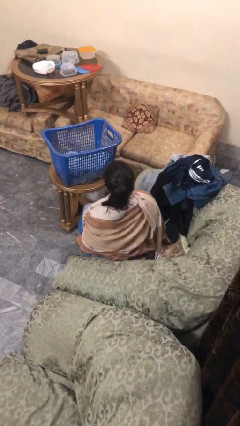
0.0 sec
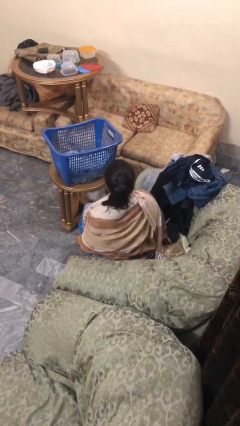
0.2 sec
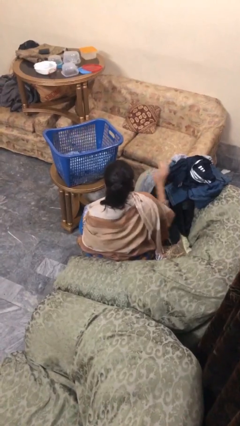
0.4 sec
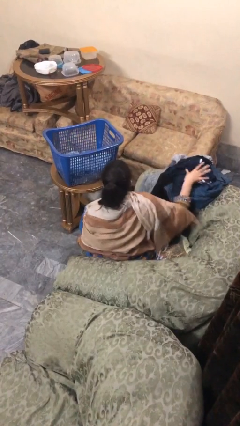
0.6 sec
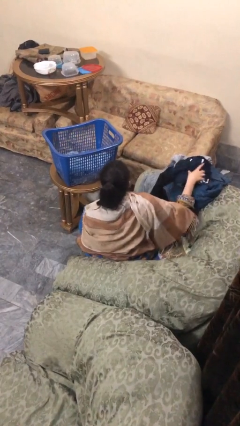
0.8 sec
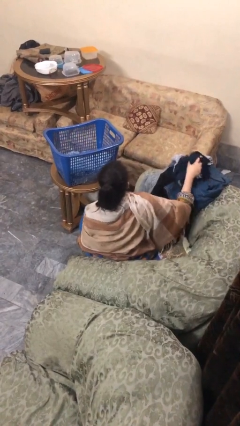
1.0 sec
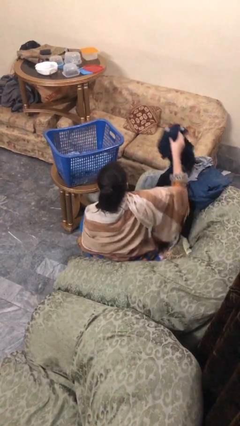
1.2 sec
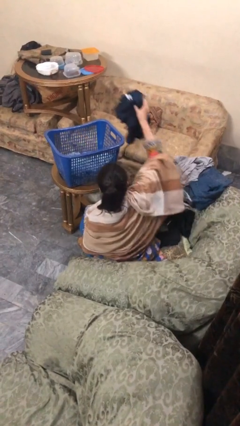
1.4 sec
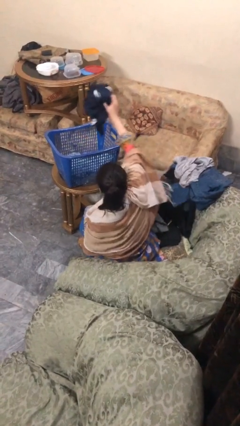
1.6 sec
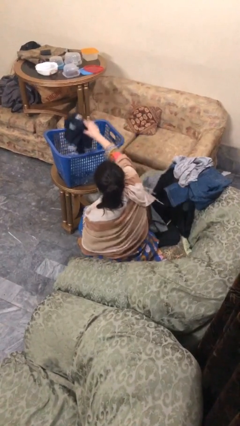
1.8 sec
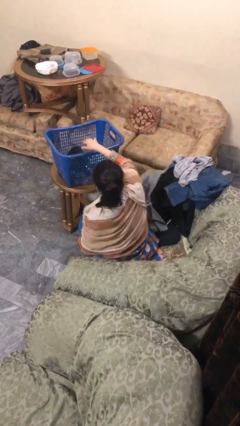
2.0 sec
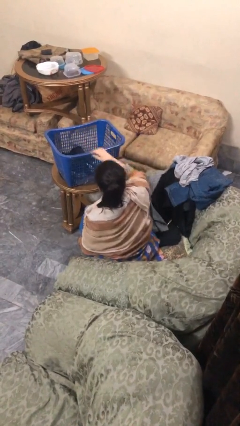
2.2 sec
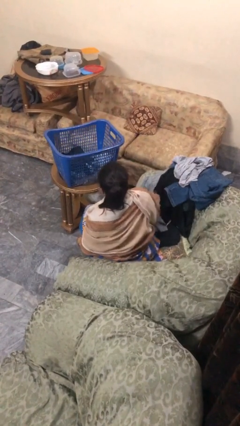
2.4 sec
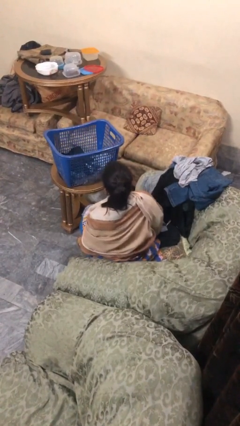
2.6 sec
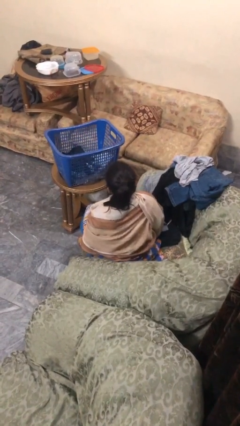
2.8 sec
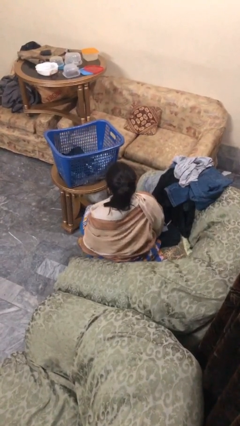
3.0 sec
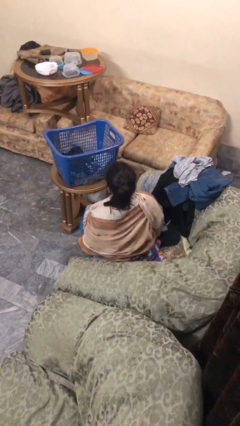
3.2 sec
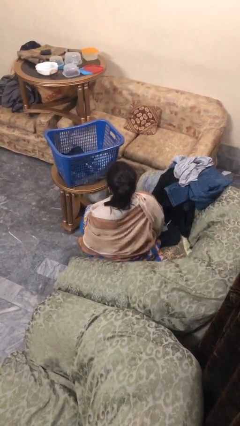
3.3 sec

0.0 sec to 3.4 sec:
person puts object into basket

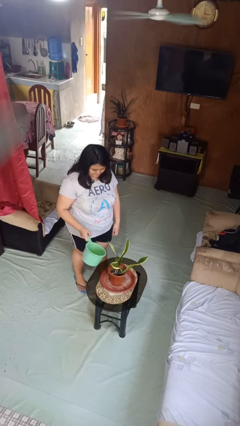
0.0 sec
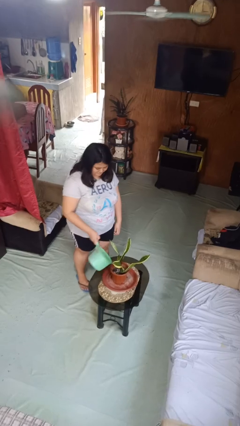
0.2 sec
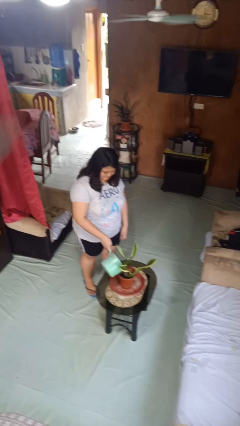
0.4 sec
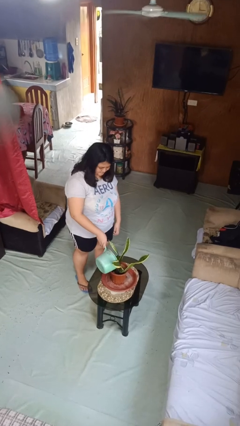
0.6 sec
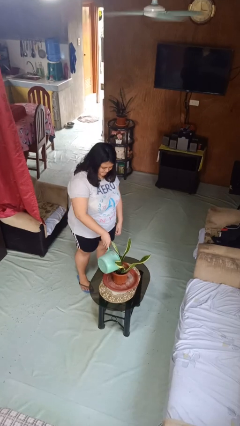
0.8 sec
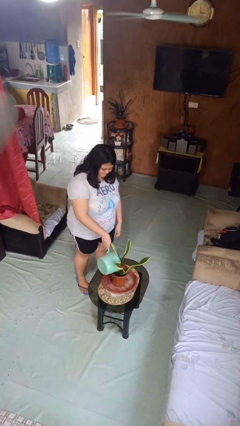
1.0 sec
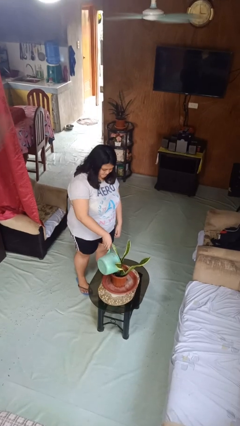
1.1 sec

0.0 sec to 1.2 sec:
person waters houseplant

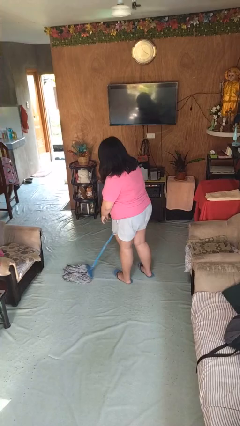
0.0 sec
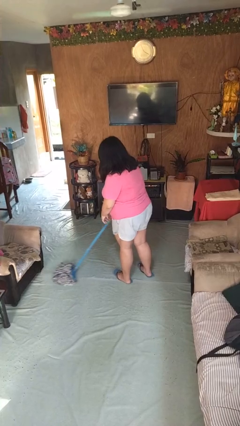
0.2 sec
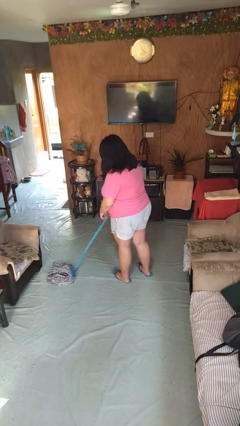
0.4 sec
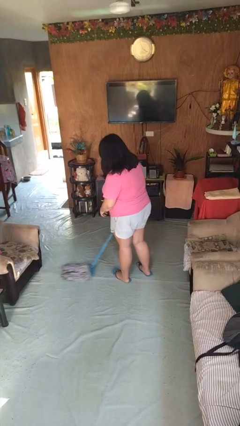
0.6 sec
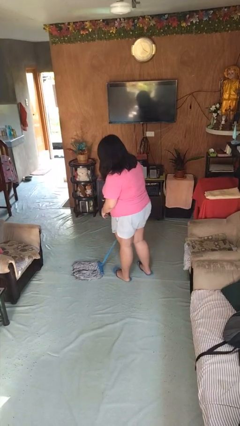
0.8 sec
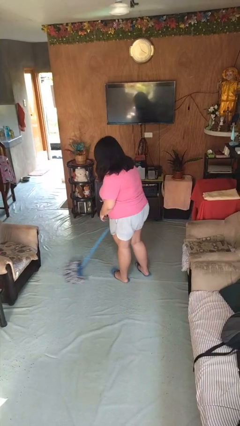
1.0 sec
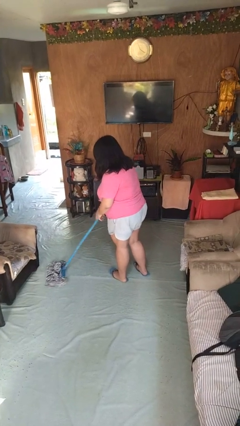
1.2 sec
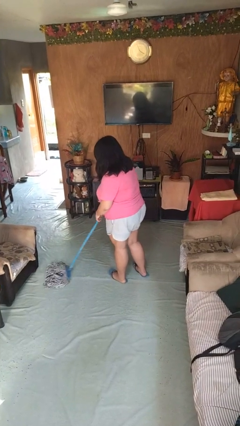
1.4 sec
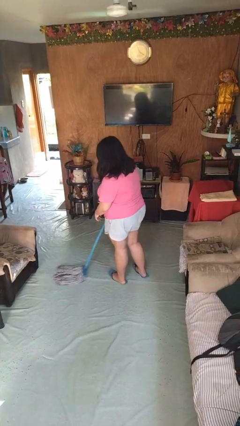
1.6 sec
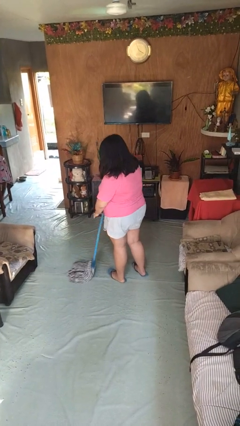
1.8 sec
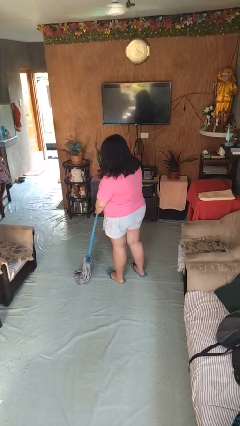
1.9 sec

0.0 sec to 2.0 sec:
person mops

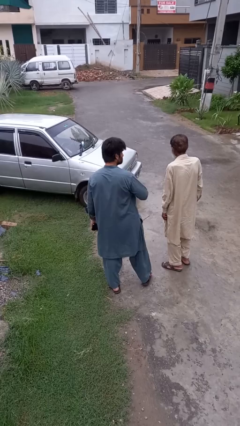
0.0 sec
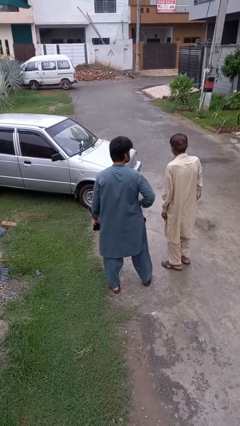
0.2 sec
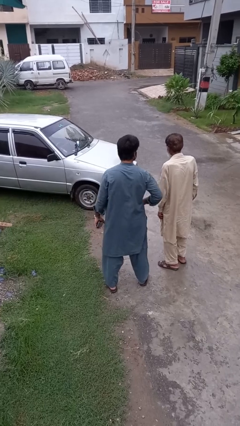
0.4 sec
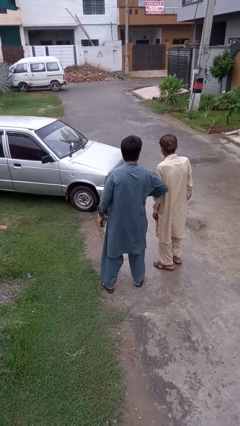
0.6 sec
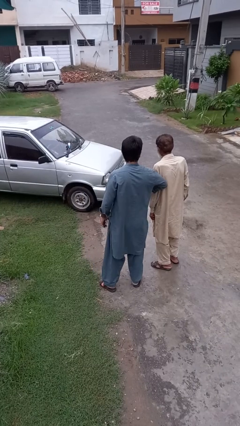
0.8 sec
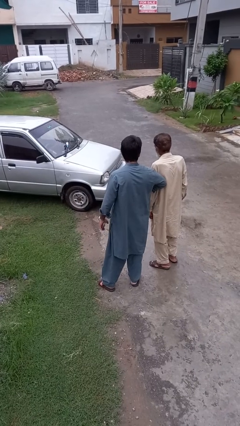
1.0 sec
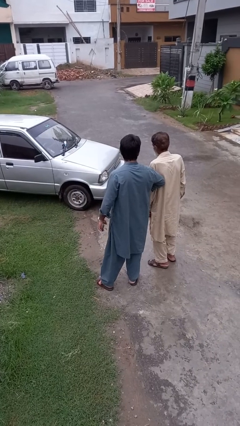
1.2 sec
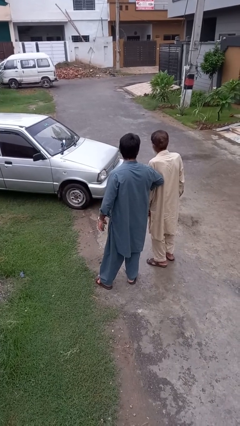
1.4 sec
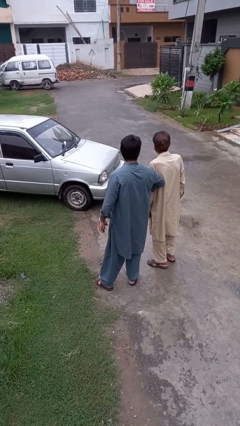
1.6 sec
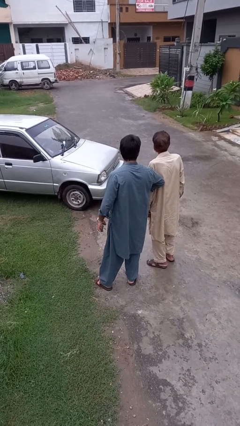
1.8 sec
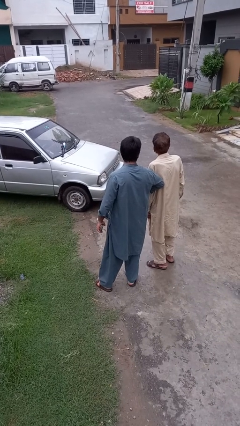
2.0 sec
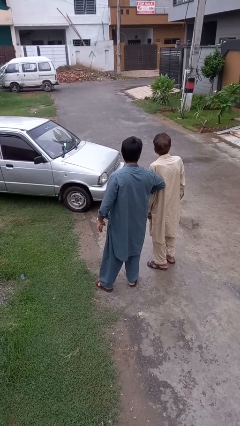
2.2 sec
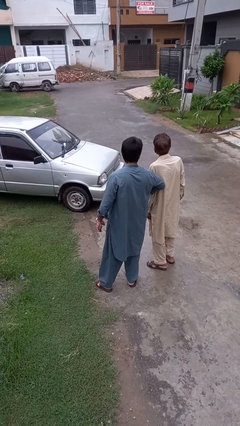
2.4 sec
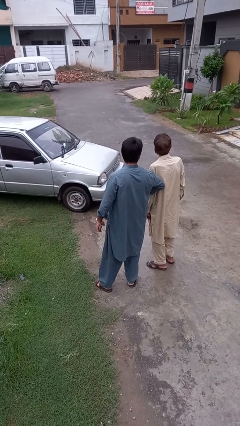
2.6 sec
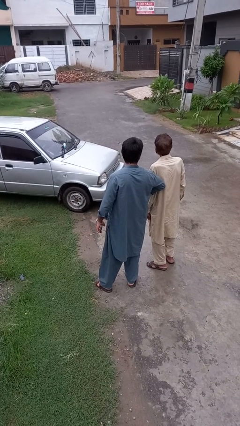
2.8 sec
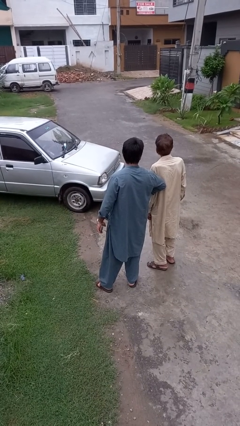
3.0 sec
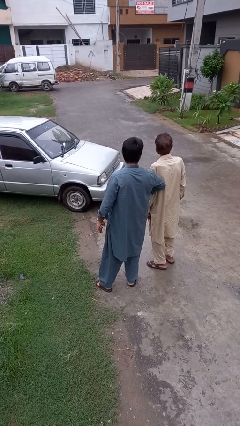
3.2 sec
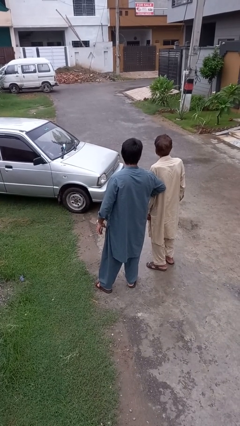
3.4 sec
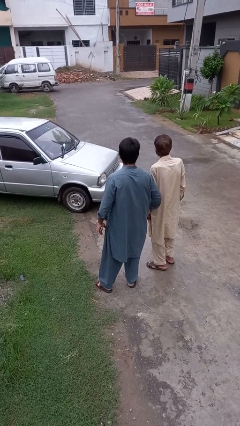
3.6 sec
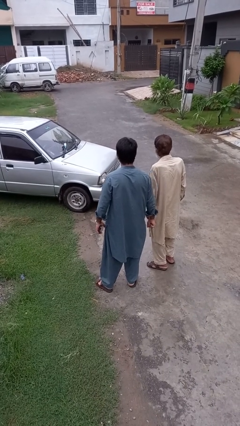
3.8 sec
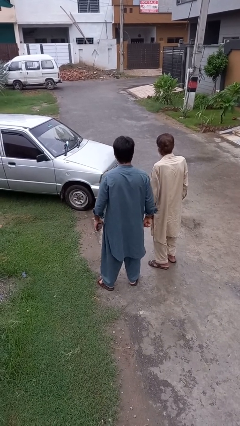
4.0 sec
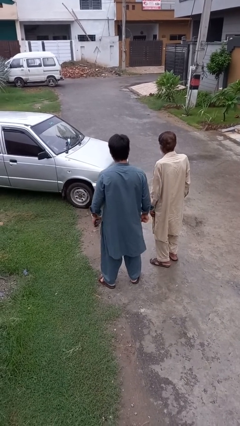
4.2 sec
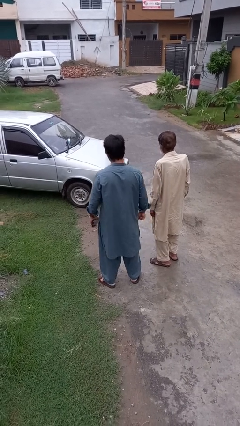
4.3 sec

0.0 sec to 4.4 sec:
person nudges person with elbow

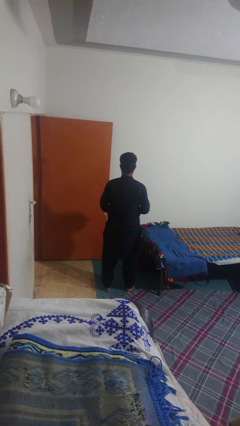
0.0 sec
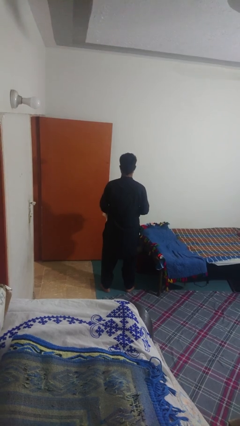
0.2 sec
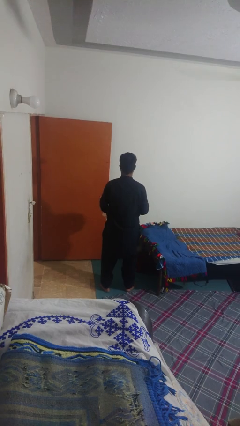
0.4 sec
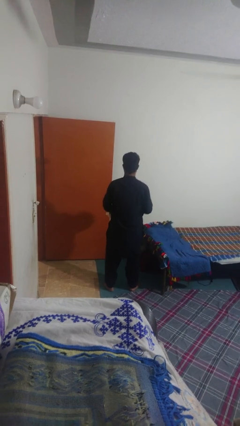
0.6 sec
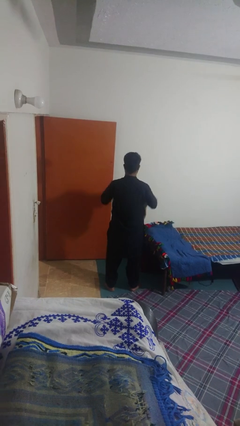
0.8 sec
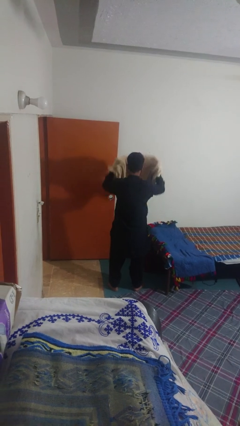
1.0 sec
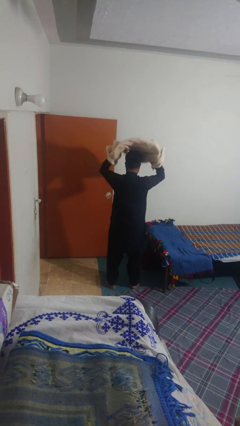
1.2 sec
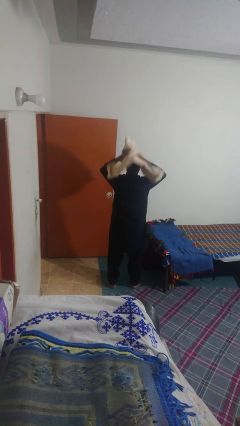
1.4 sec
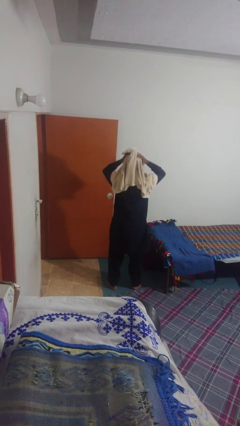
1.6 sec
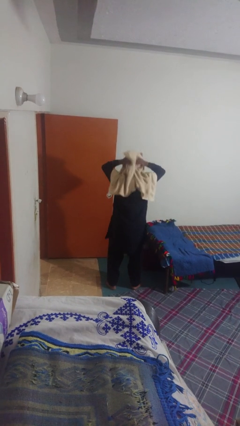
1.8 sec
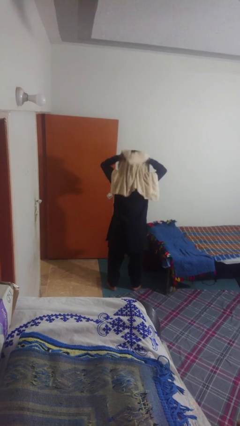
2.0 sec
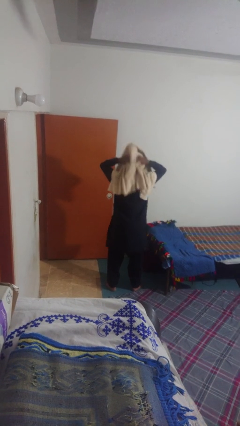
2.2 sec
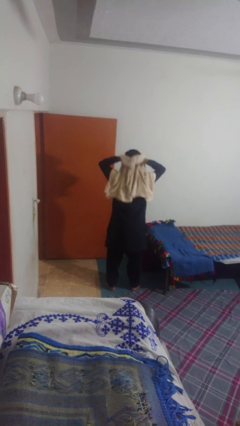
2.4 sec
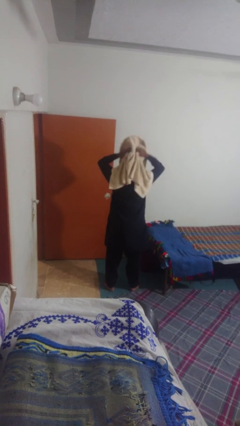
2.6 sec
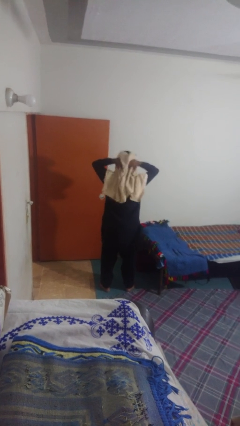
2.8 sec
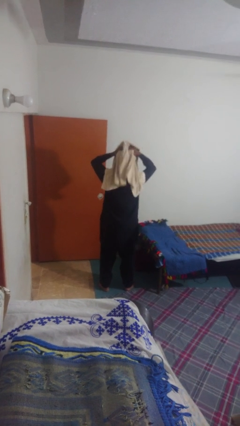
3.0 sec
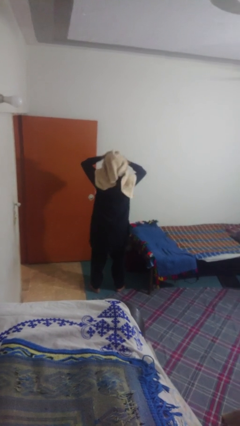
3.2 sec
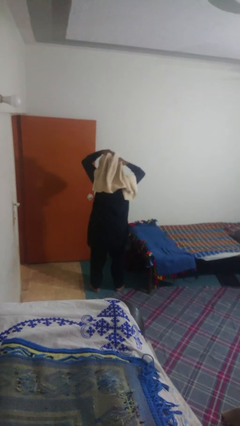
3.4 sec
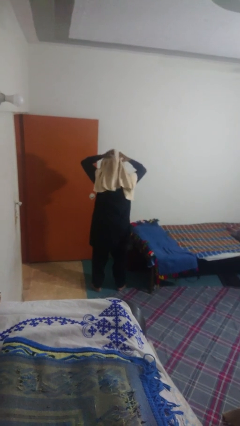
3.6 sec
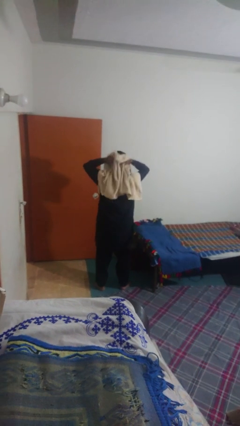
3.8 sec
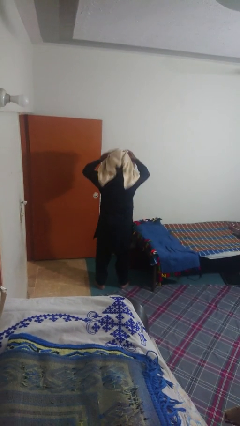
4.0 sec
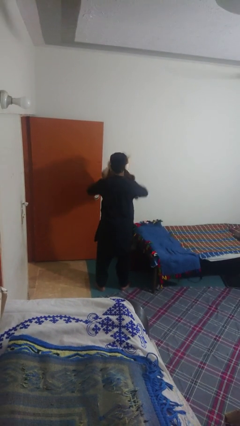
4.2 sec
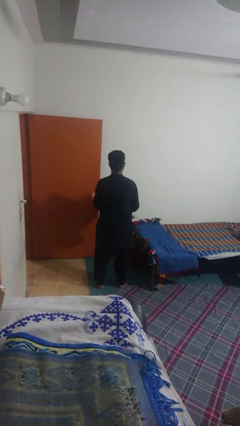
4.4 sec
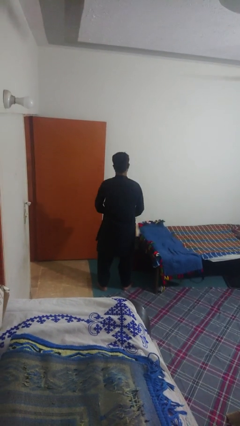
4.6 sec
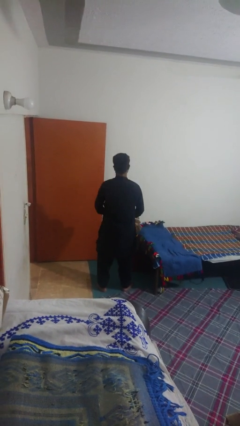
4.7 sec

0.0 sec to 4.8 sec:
person dries hair with towel

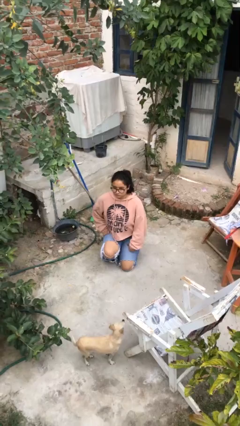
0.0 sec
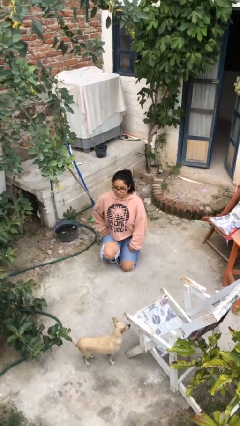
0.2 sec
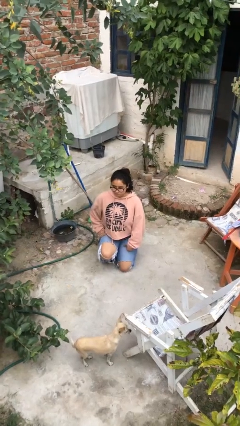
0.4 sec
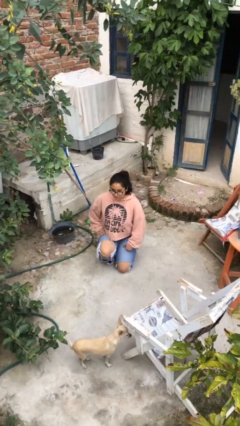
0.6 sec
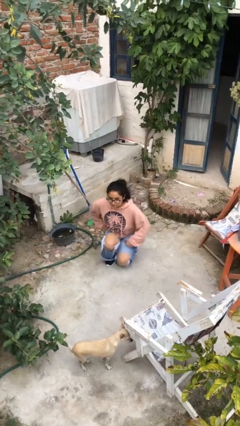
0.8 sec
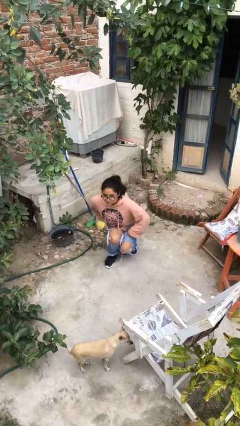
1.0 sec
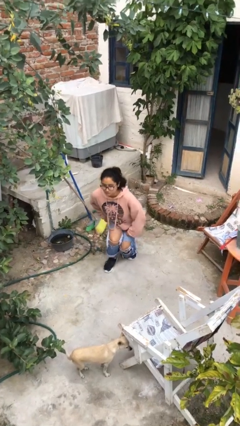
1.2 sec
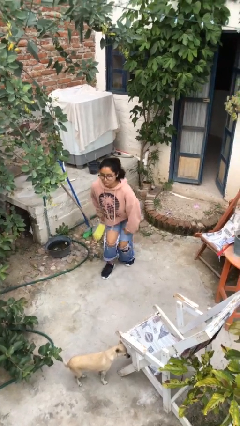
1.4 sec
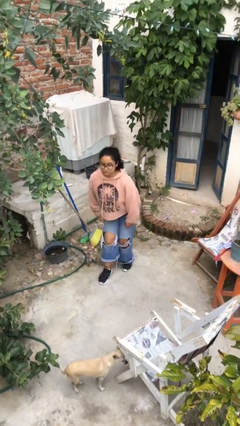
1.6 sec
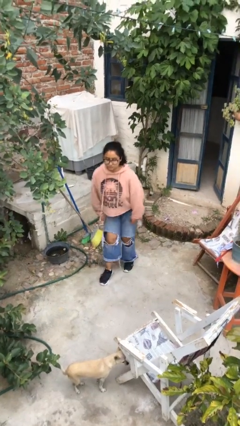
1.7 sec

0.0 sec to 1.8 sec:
person stands up from floor

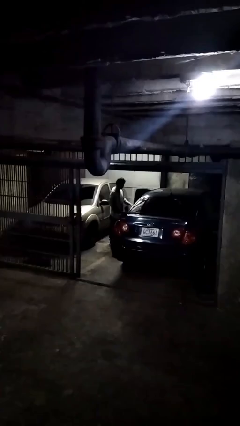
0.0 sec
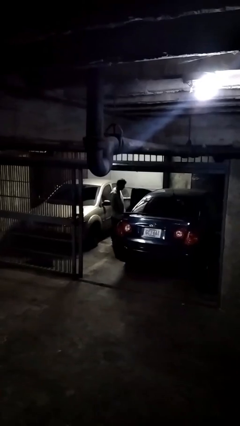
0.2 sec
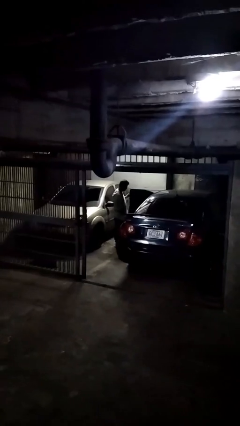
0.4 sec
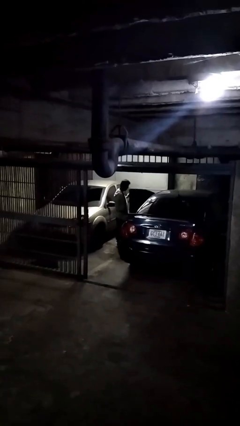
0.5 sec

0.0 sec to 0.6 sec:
person opens car door
